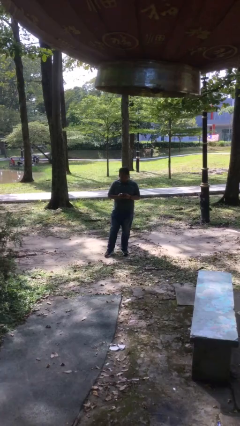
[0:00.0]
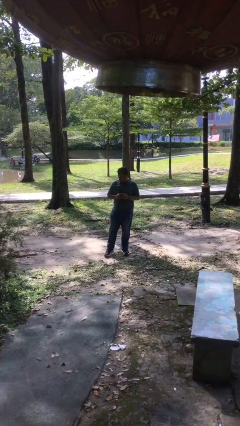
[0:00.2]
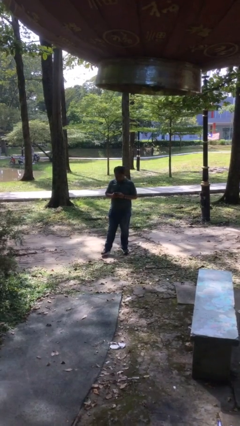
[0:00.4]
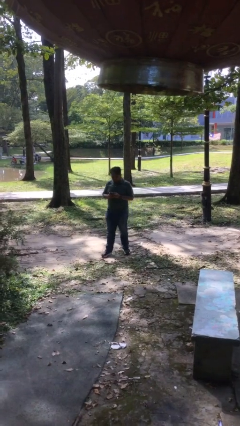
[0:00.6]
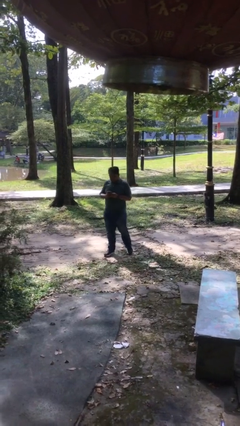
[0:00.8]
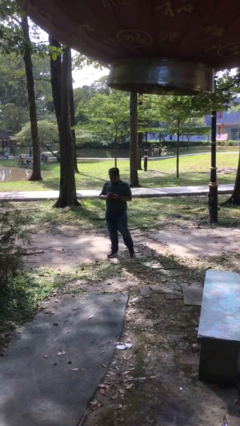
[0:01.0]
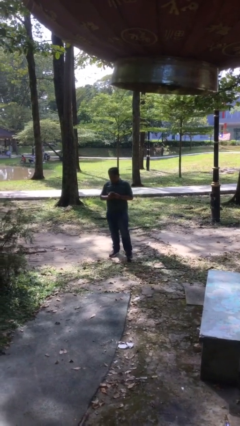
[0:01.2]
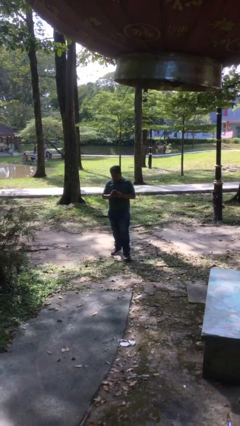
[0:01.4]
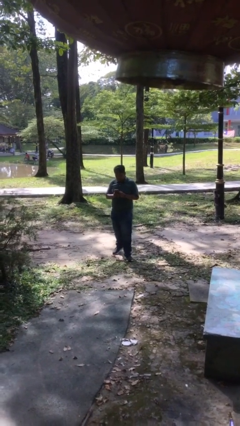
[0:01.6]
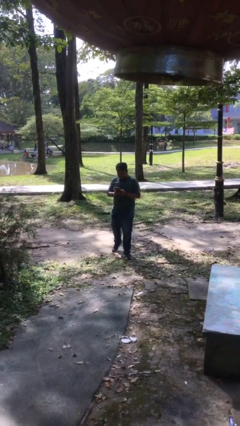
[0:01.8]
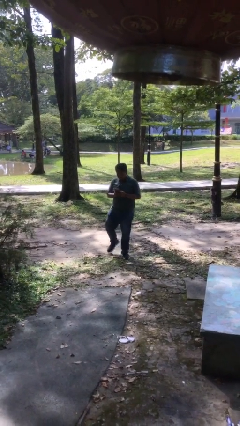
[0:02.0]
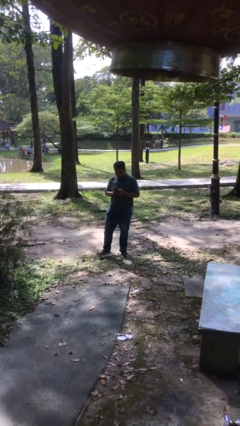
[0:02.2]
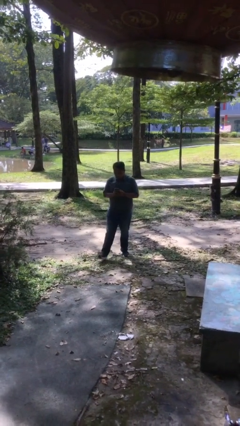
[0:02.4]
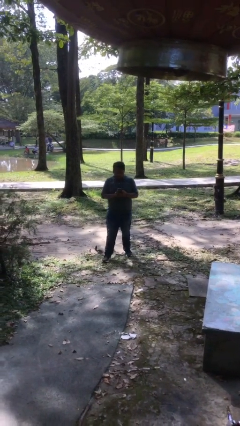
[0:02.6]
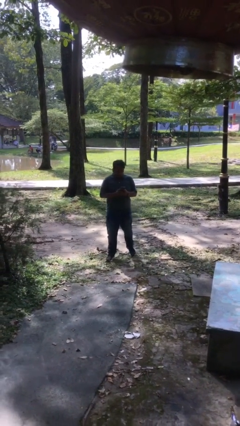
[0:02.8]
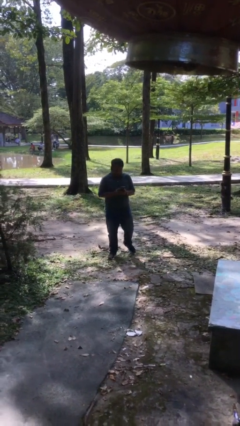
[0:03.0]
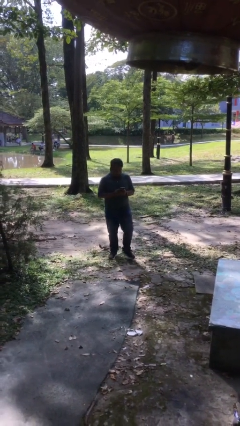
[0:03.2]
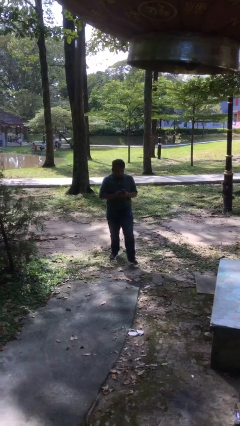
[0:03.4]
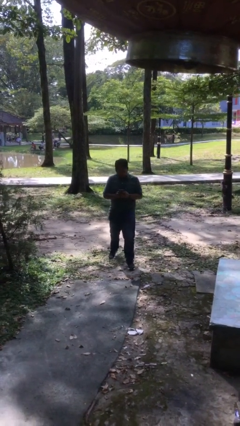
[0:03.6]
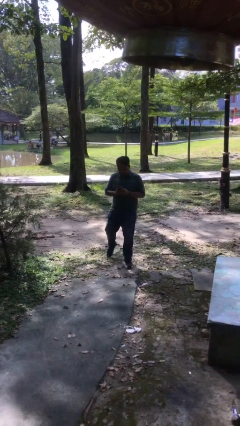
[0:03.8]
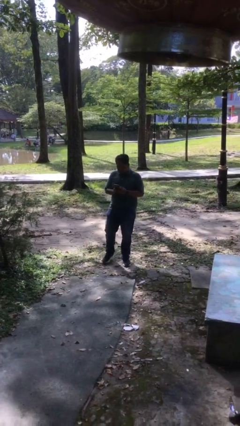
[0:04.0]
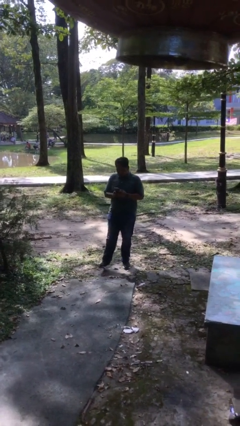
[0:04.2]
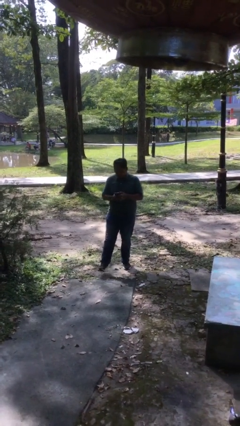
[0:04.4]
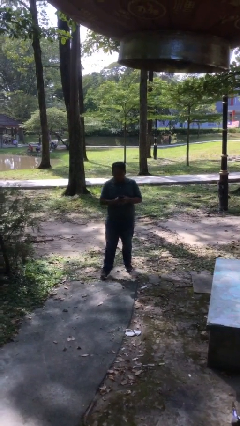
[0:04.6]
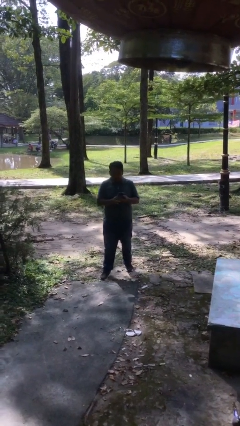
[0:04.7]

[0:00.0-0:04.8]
person texts on phone

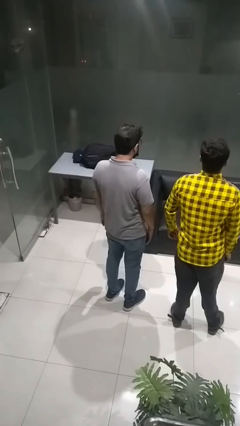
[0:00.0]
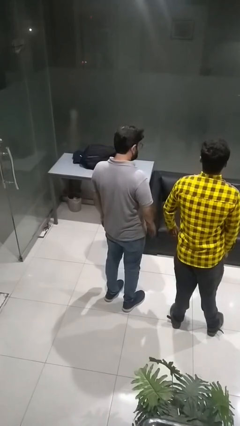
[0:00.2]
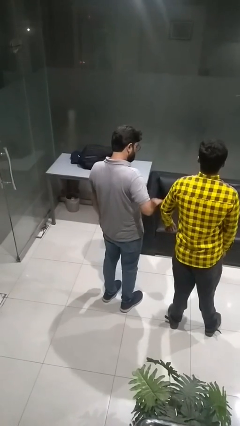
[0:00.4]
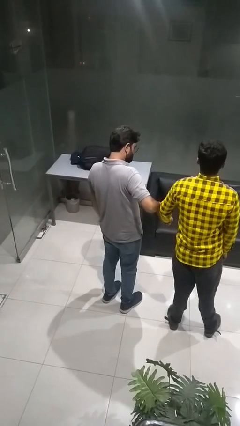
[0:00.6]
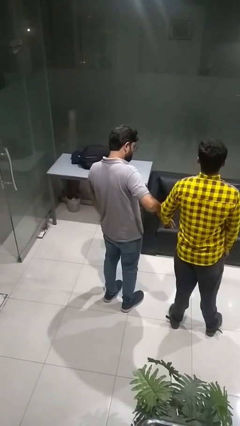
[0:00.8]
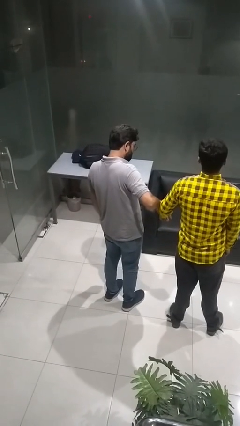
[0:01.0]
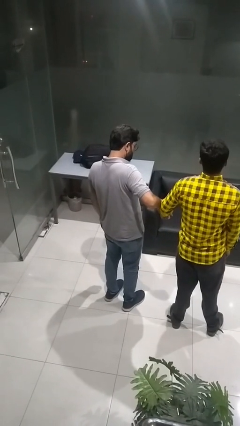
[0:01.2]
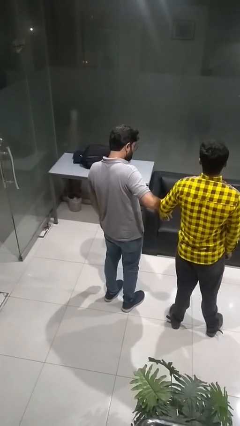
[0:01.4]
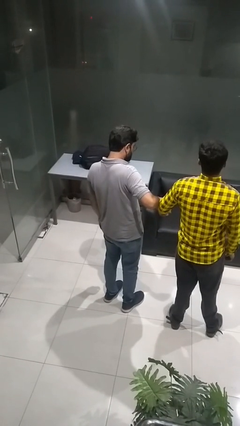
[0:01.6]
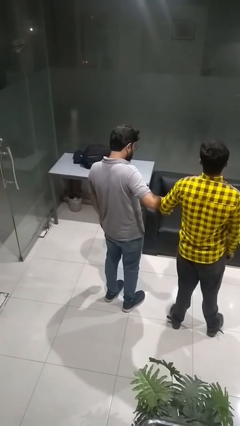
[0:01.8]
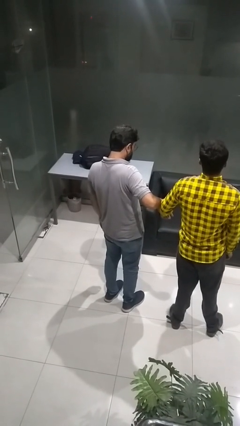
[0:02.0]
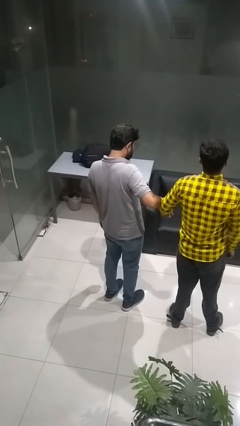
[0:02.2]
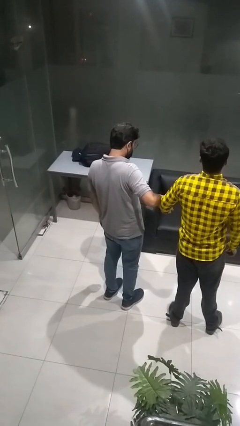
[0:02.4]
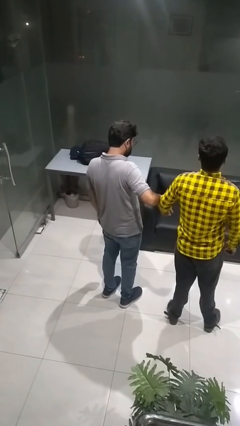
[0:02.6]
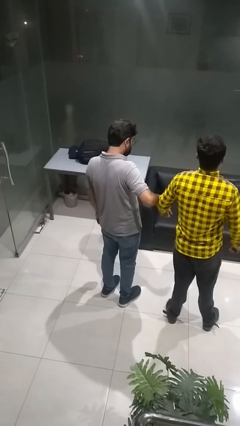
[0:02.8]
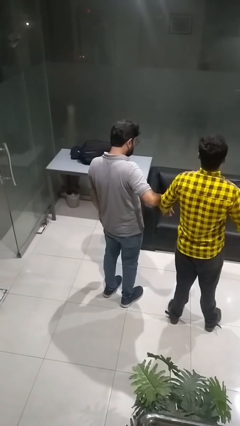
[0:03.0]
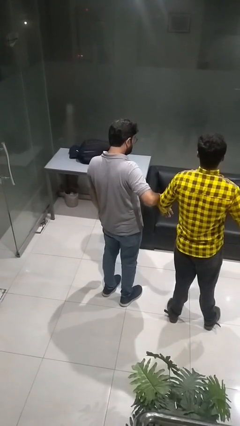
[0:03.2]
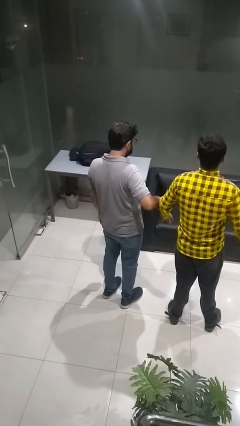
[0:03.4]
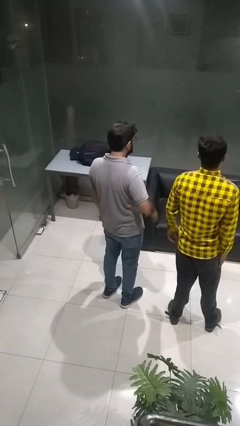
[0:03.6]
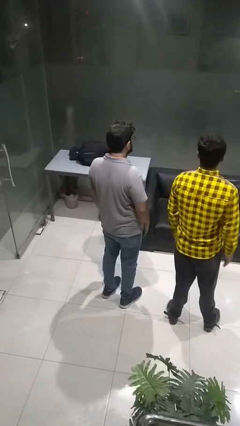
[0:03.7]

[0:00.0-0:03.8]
person grabs person by forearm

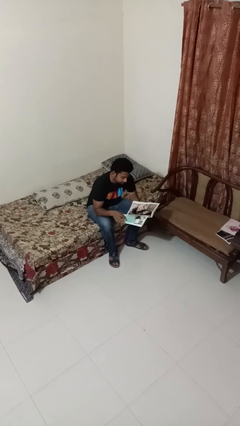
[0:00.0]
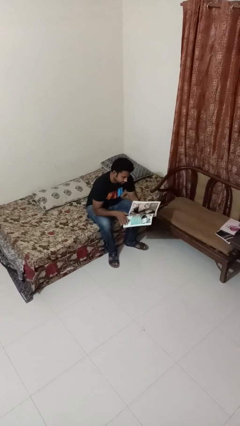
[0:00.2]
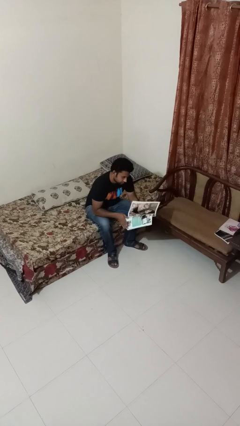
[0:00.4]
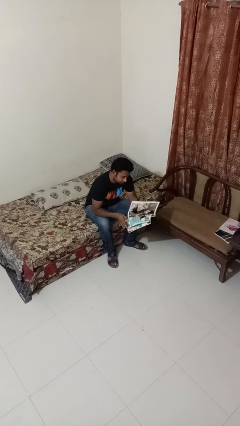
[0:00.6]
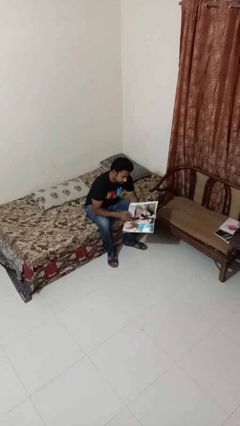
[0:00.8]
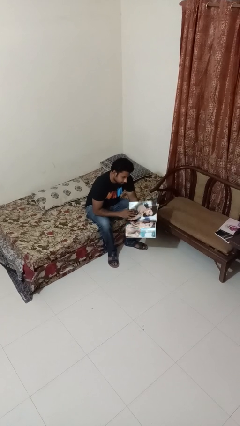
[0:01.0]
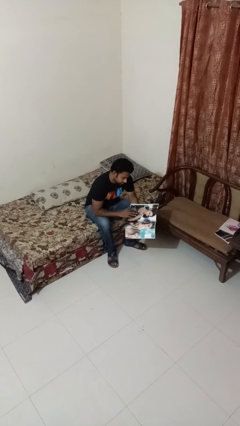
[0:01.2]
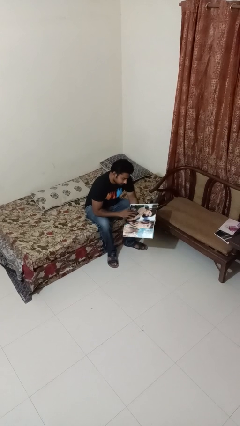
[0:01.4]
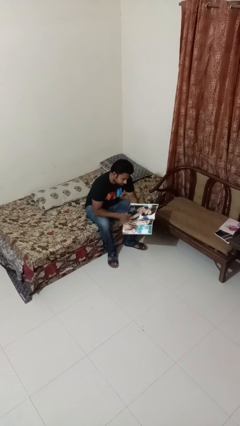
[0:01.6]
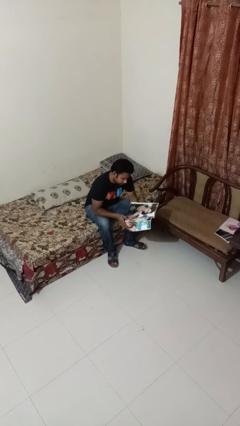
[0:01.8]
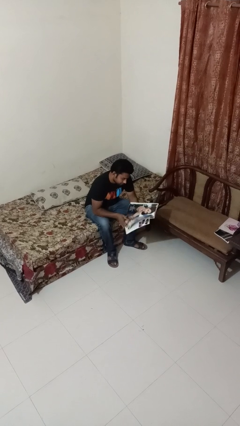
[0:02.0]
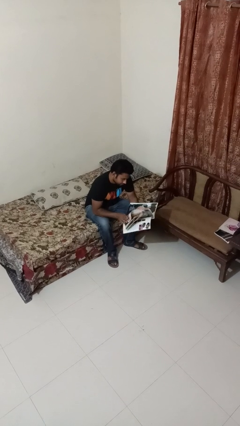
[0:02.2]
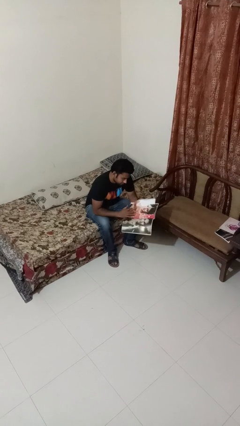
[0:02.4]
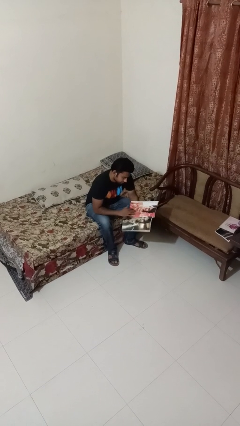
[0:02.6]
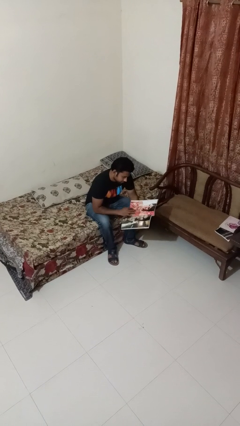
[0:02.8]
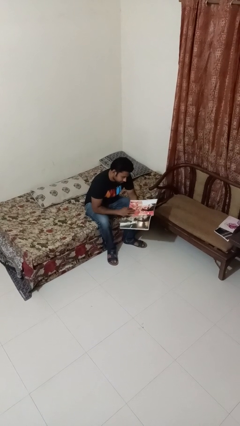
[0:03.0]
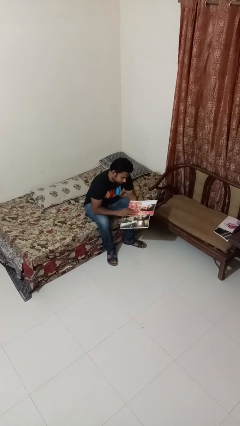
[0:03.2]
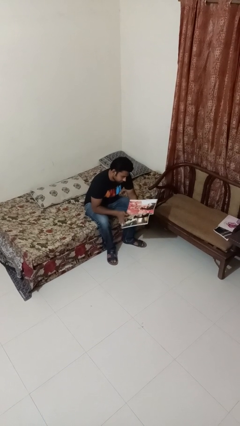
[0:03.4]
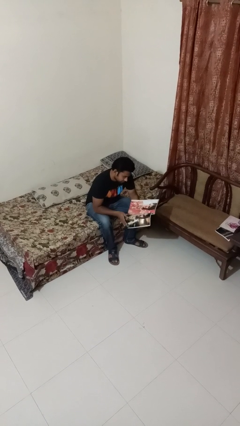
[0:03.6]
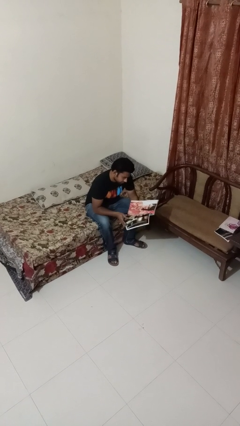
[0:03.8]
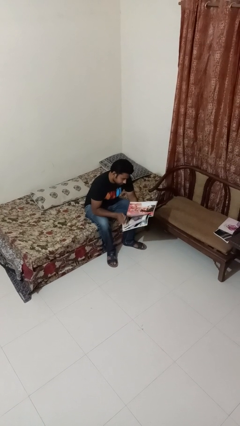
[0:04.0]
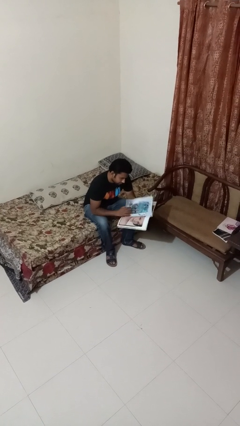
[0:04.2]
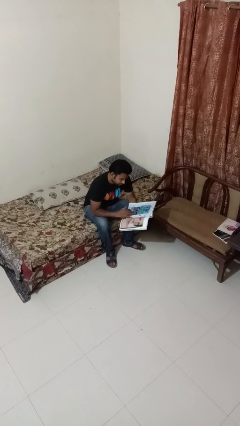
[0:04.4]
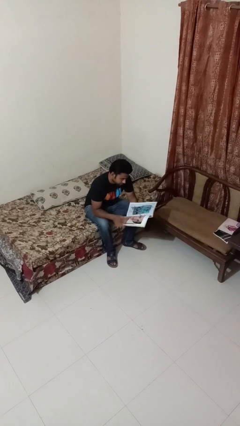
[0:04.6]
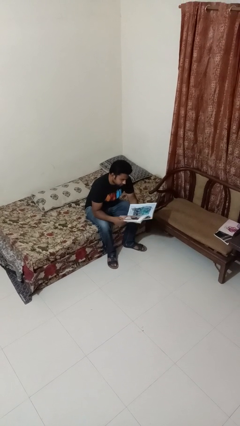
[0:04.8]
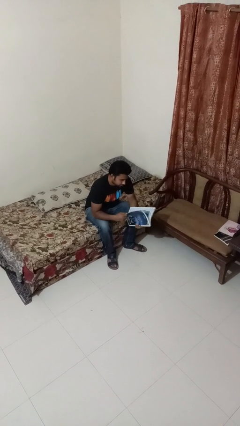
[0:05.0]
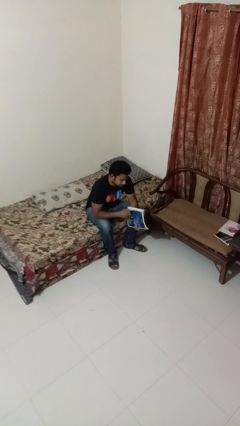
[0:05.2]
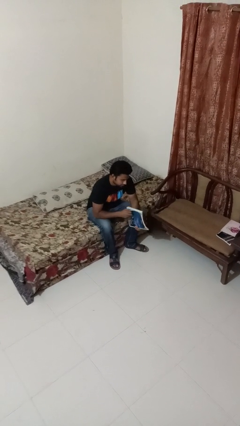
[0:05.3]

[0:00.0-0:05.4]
person reads magazine

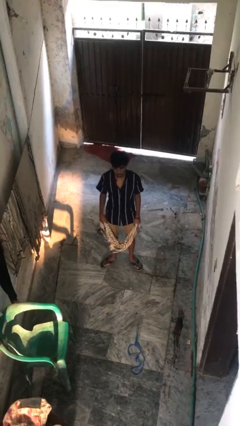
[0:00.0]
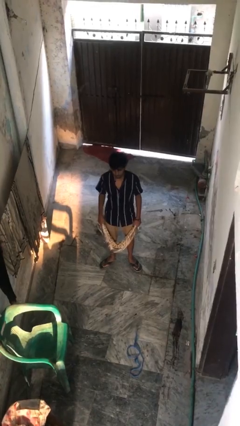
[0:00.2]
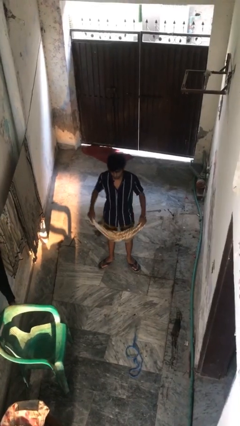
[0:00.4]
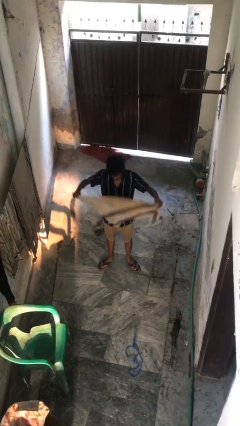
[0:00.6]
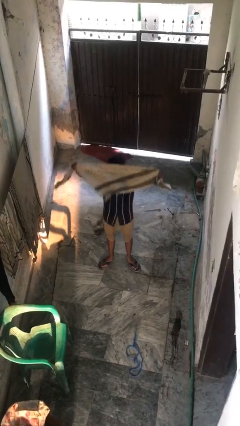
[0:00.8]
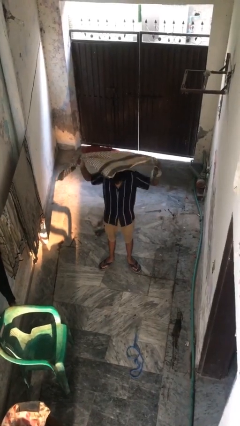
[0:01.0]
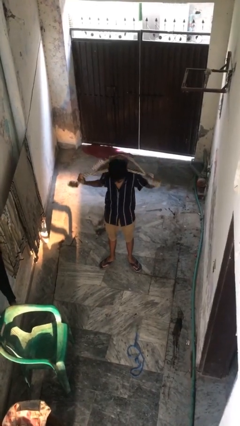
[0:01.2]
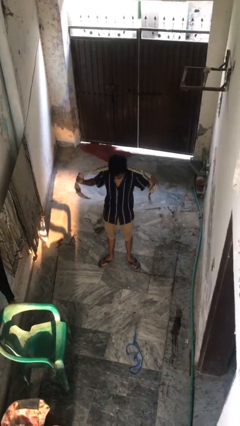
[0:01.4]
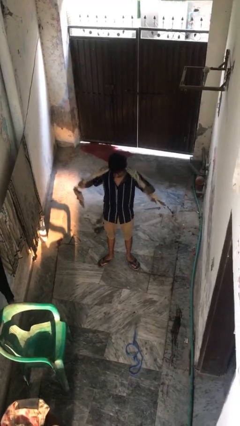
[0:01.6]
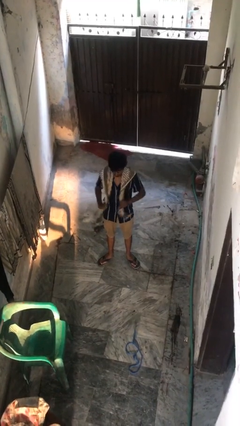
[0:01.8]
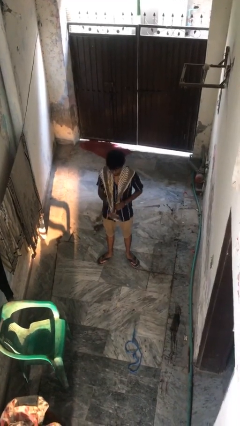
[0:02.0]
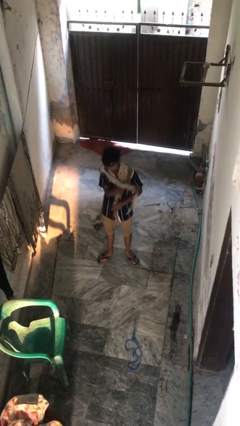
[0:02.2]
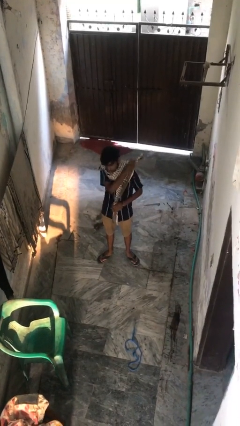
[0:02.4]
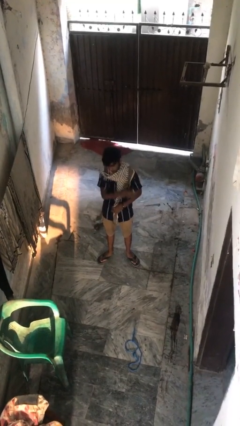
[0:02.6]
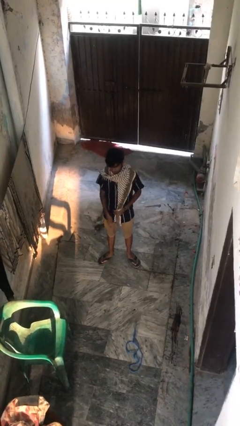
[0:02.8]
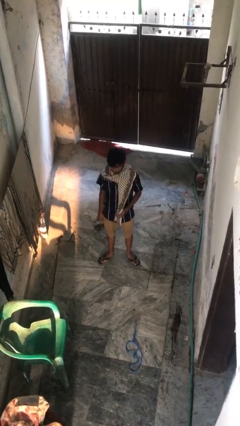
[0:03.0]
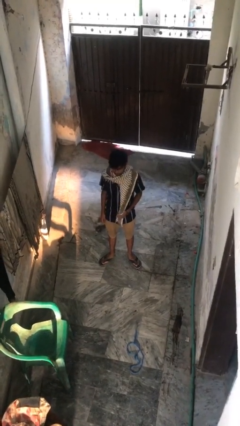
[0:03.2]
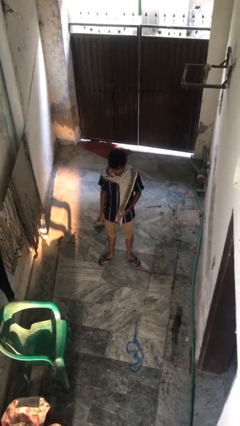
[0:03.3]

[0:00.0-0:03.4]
person puts on scarf

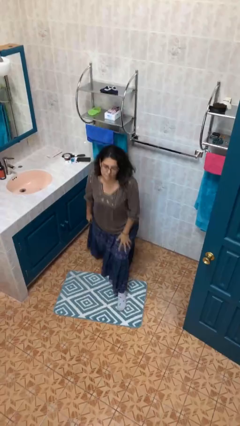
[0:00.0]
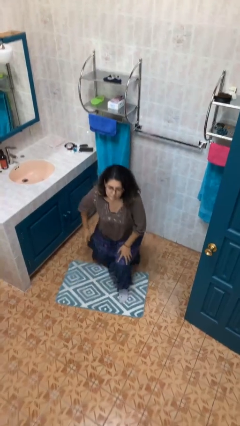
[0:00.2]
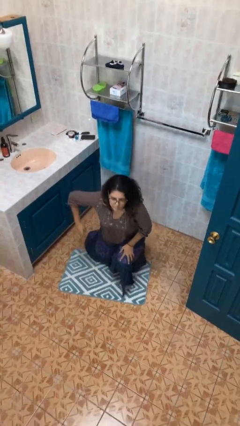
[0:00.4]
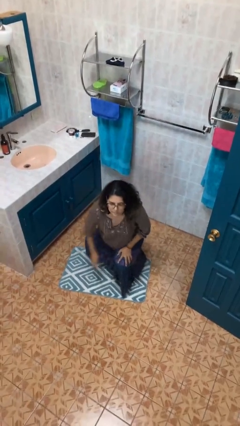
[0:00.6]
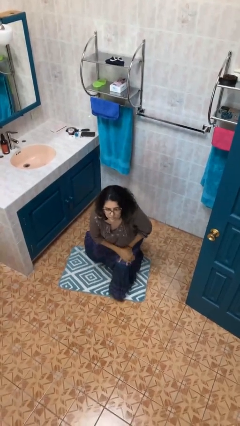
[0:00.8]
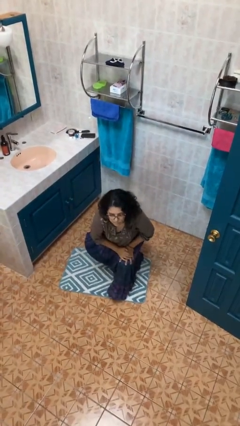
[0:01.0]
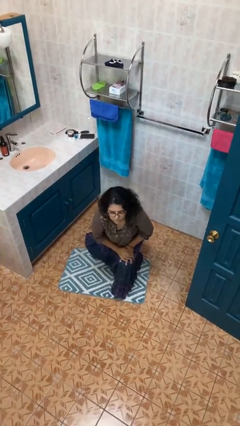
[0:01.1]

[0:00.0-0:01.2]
person kneels
